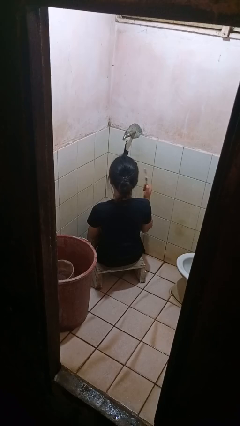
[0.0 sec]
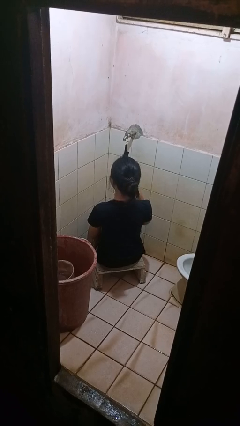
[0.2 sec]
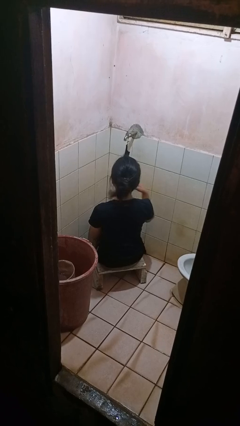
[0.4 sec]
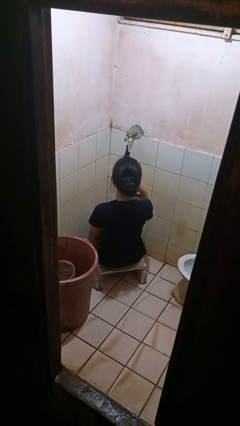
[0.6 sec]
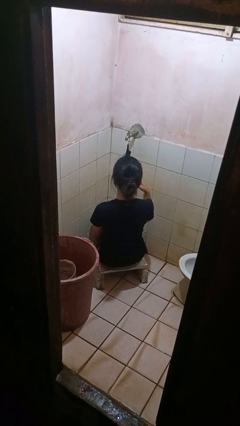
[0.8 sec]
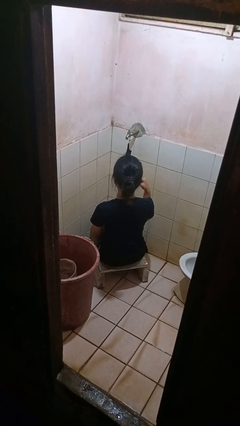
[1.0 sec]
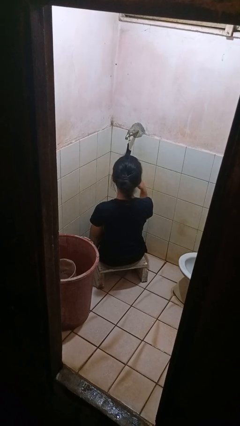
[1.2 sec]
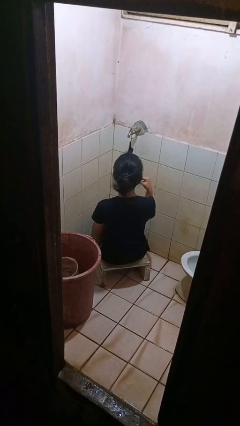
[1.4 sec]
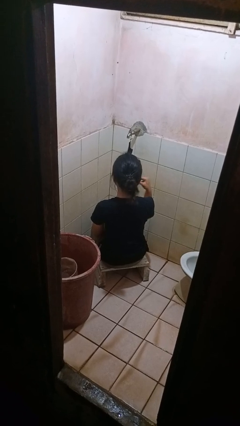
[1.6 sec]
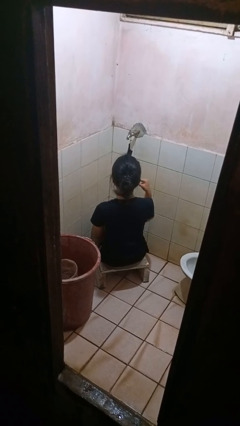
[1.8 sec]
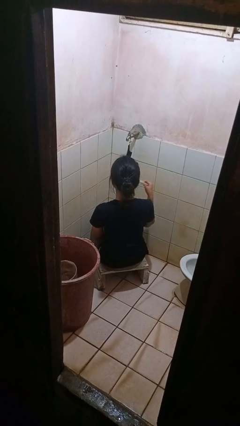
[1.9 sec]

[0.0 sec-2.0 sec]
person brushes teeth

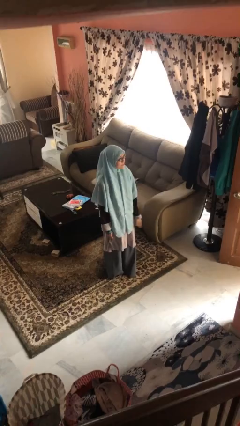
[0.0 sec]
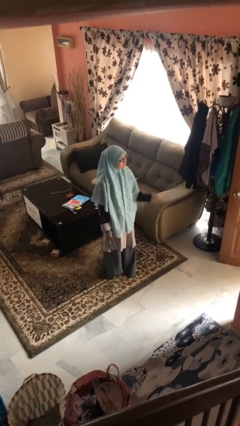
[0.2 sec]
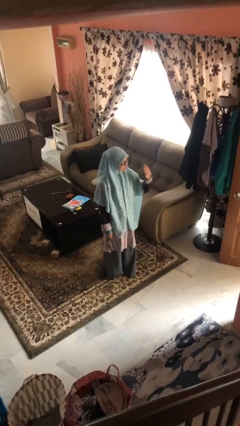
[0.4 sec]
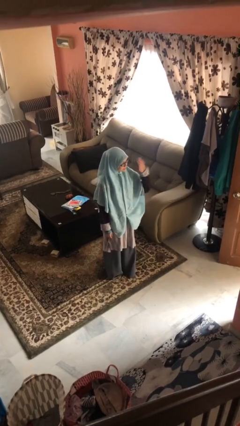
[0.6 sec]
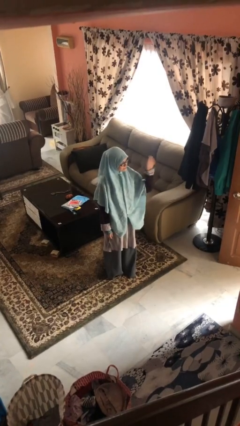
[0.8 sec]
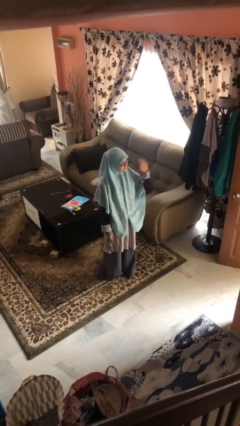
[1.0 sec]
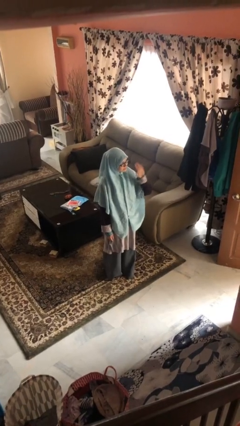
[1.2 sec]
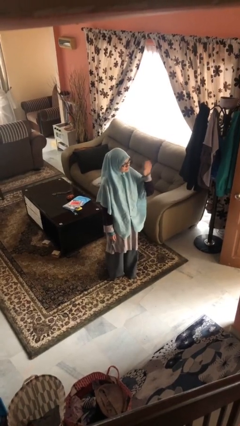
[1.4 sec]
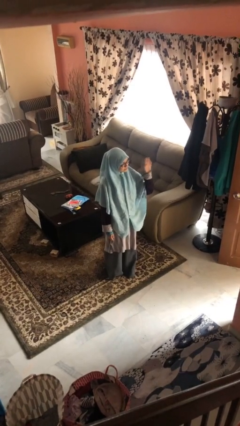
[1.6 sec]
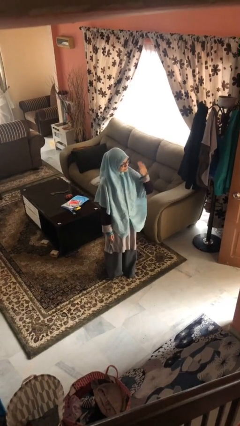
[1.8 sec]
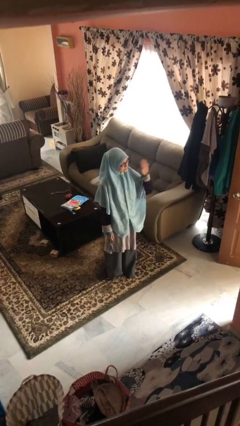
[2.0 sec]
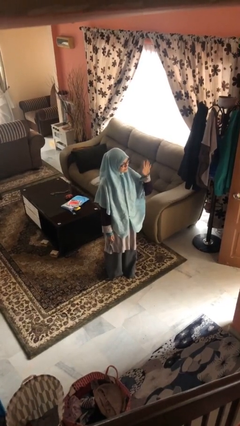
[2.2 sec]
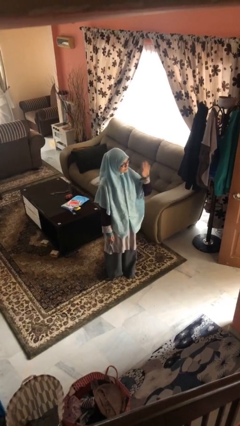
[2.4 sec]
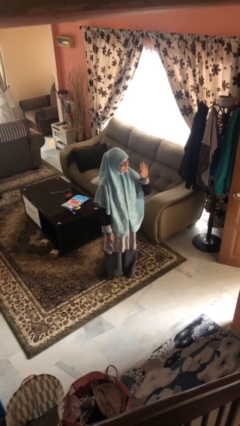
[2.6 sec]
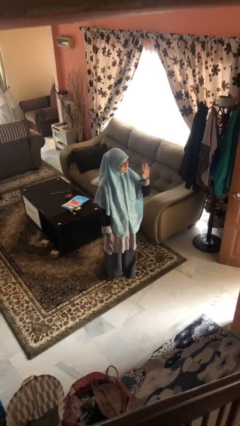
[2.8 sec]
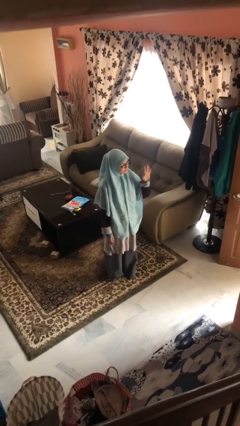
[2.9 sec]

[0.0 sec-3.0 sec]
person waves at person

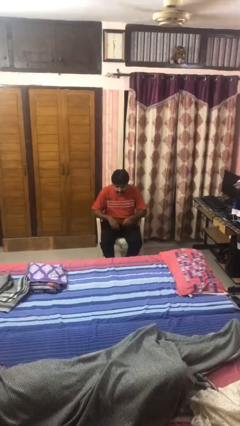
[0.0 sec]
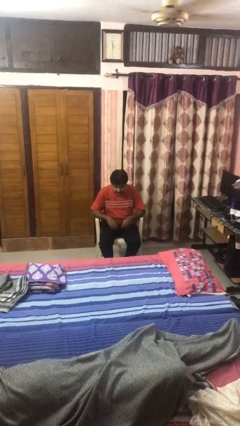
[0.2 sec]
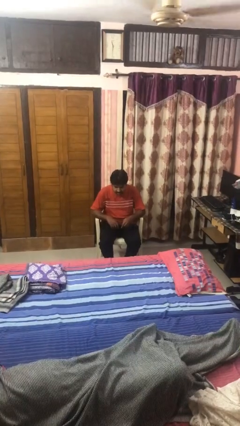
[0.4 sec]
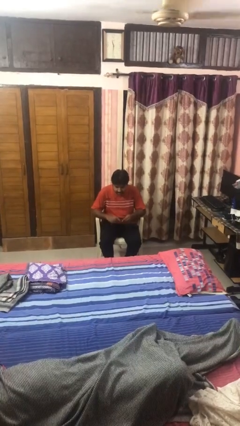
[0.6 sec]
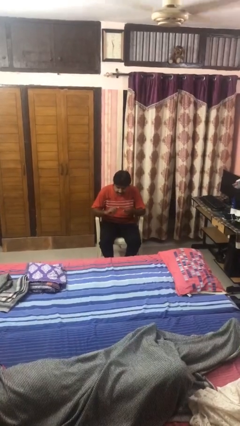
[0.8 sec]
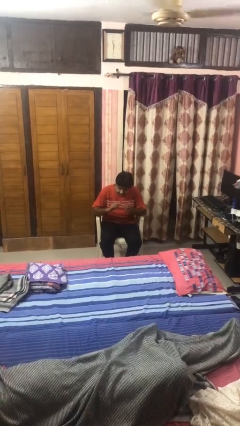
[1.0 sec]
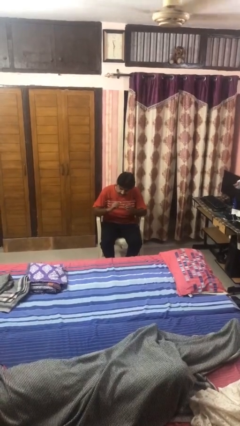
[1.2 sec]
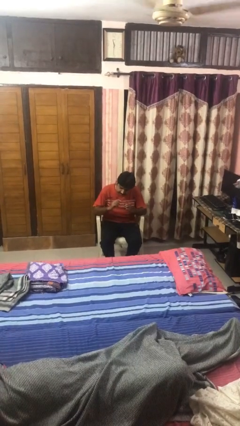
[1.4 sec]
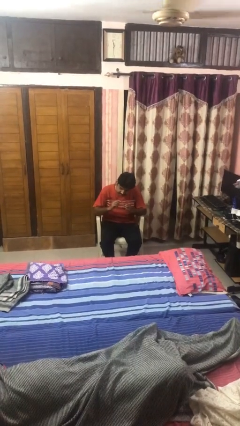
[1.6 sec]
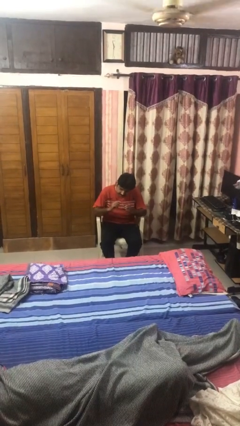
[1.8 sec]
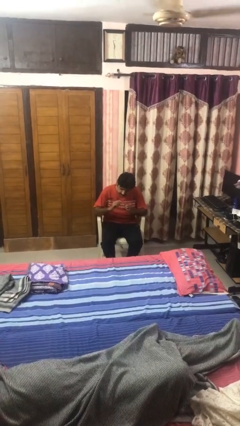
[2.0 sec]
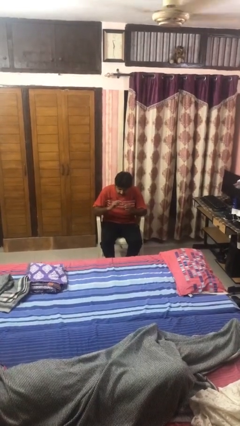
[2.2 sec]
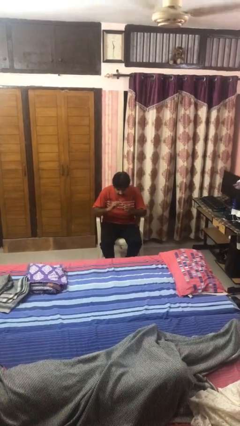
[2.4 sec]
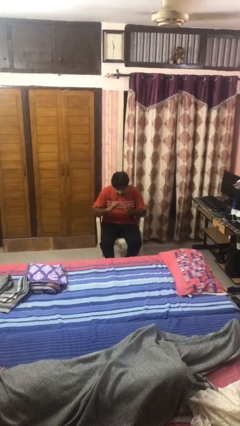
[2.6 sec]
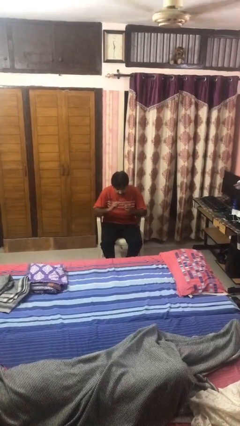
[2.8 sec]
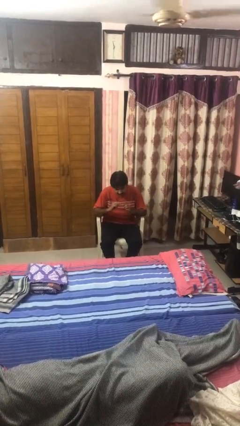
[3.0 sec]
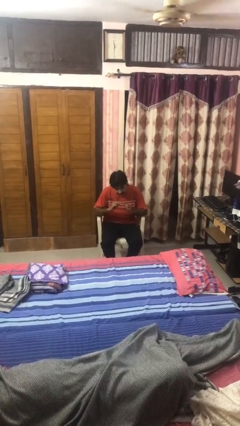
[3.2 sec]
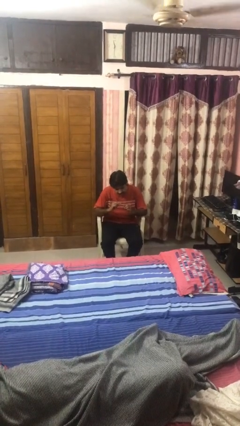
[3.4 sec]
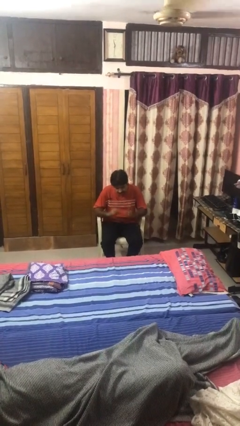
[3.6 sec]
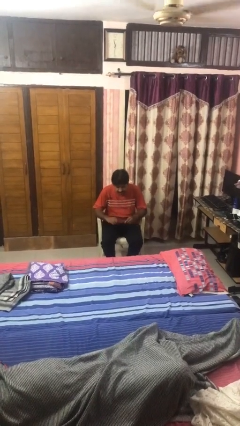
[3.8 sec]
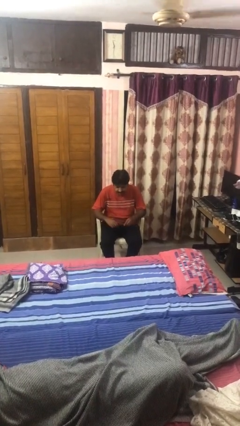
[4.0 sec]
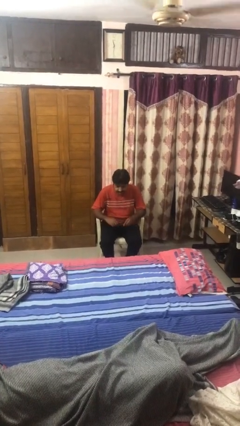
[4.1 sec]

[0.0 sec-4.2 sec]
person files fingernails

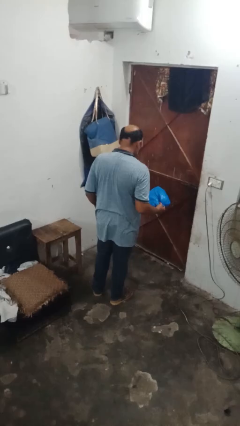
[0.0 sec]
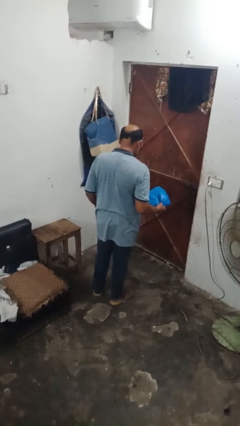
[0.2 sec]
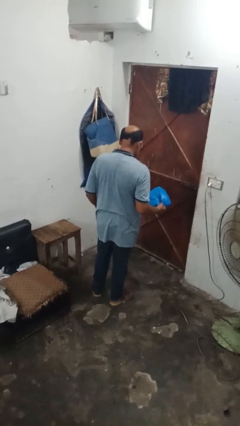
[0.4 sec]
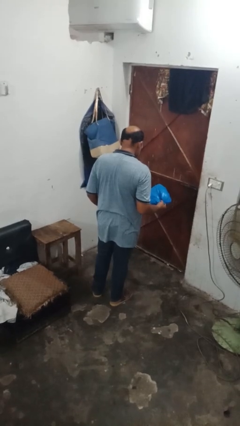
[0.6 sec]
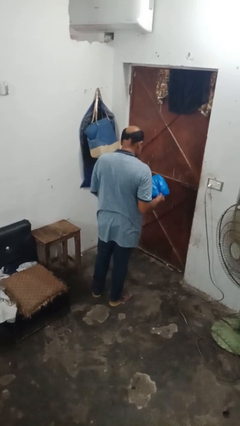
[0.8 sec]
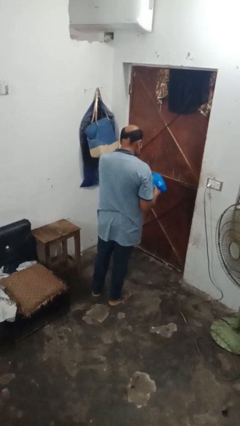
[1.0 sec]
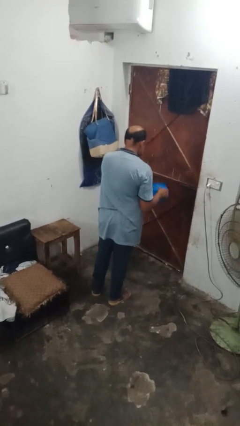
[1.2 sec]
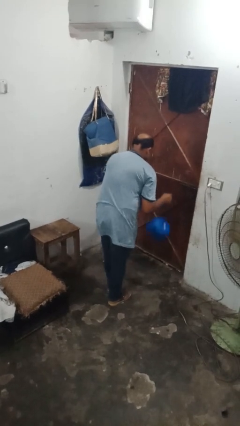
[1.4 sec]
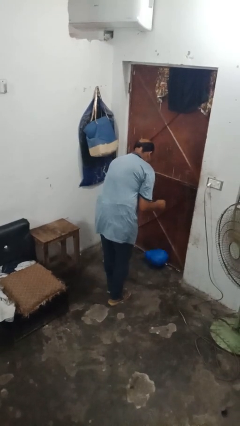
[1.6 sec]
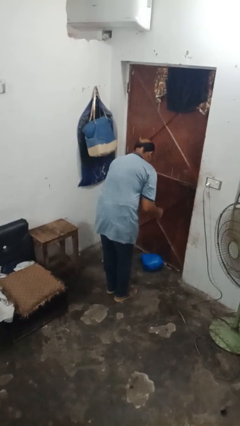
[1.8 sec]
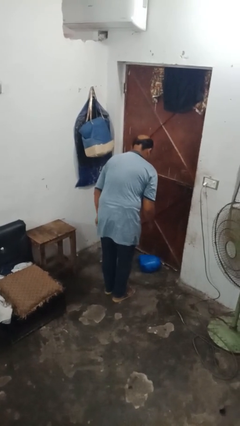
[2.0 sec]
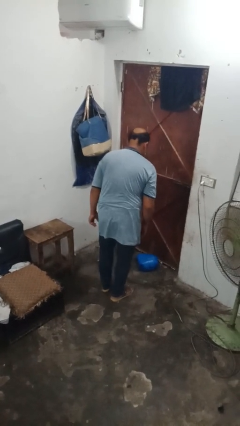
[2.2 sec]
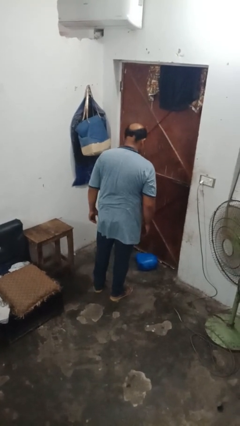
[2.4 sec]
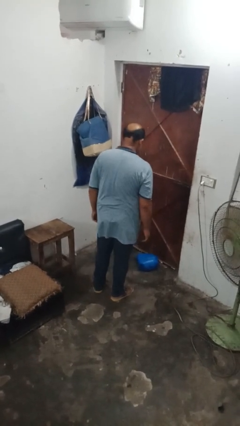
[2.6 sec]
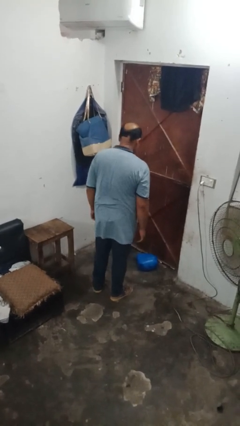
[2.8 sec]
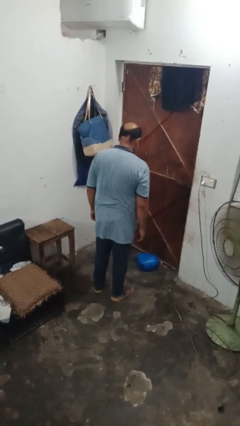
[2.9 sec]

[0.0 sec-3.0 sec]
person drops object

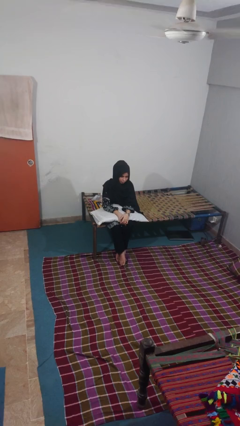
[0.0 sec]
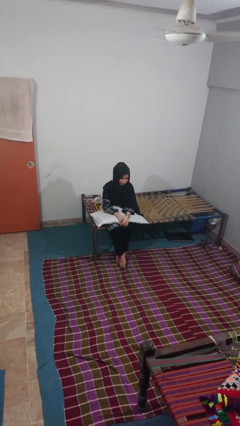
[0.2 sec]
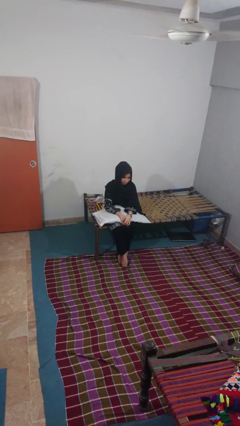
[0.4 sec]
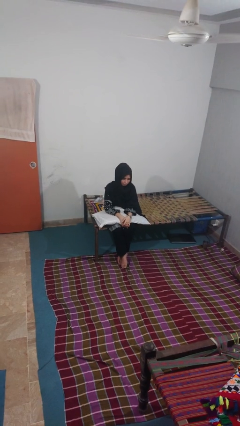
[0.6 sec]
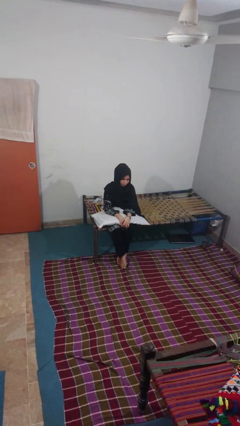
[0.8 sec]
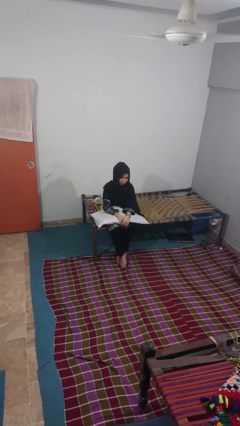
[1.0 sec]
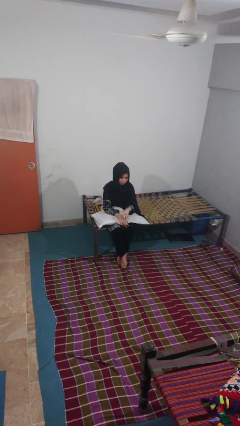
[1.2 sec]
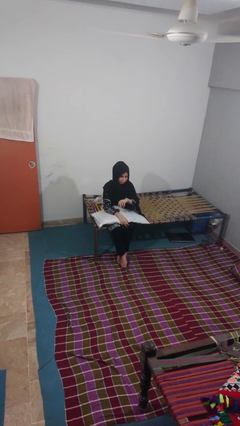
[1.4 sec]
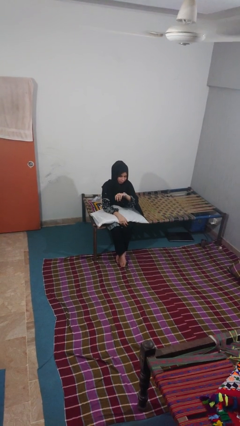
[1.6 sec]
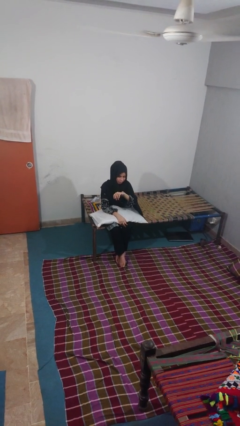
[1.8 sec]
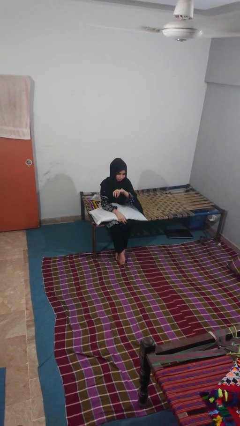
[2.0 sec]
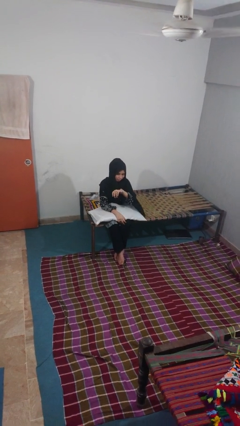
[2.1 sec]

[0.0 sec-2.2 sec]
person looks at wristwatch

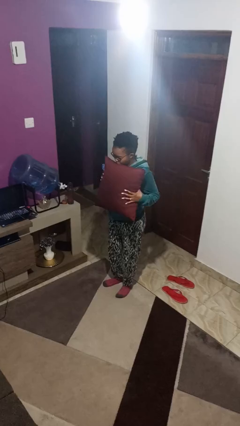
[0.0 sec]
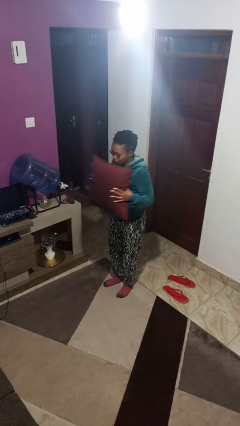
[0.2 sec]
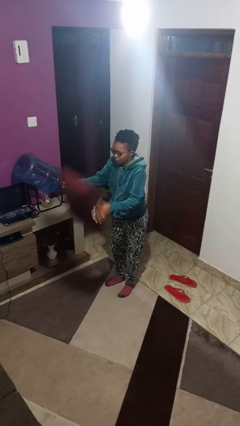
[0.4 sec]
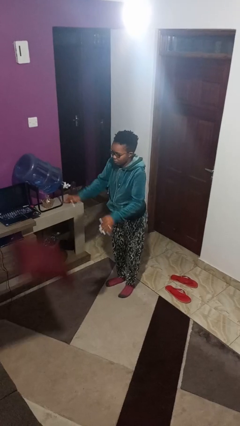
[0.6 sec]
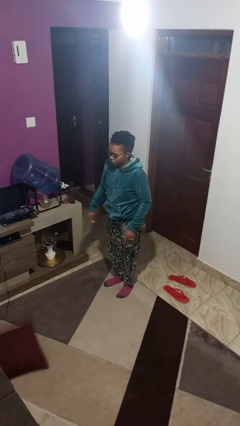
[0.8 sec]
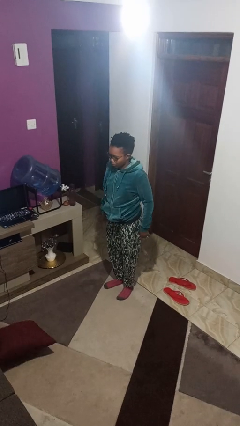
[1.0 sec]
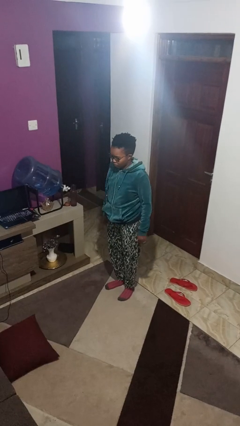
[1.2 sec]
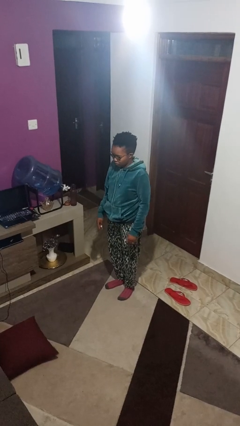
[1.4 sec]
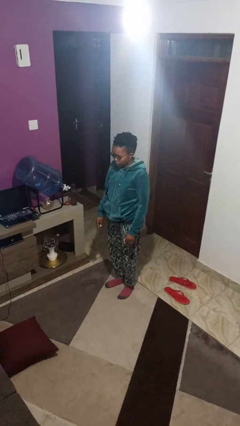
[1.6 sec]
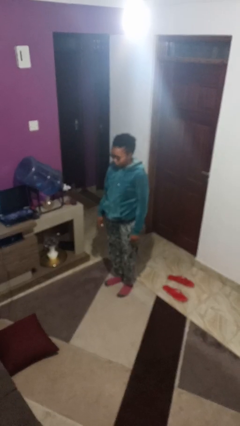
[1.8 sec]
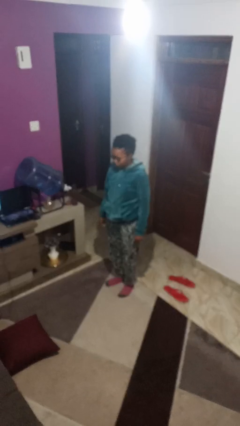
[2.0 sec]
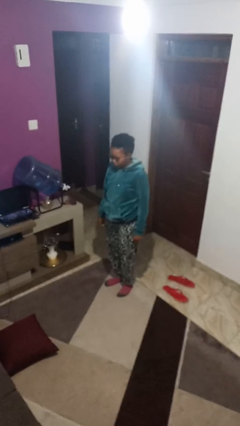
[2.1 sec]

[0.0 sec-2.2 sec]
person throws object to ground

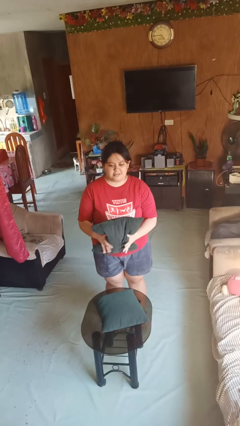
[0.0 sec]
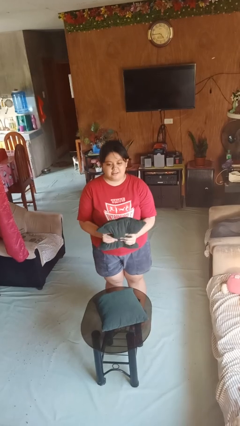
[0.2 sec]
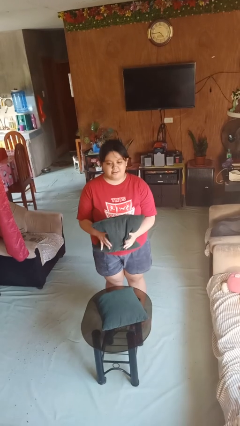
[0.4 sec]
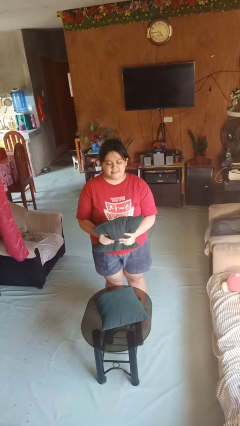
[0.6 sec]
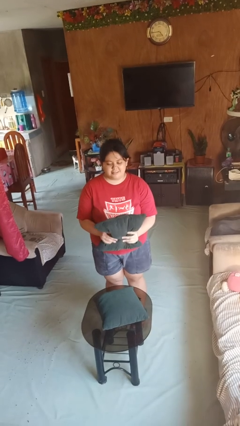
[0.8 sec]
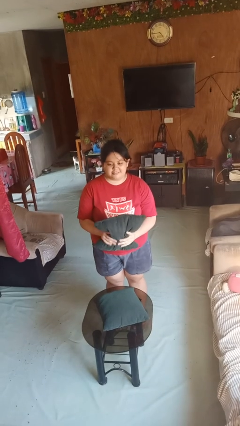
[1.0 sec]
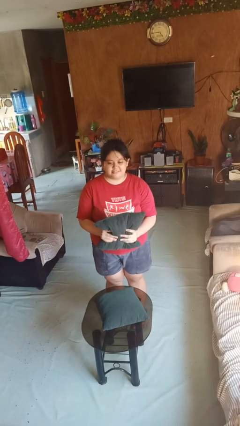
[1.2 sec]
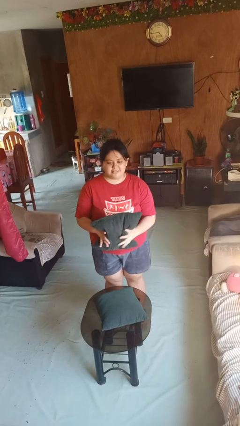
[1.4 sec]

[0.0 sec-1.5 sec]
person squeezes object
